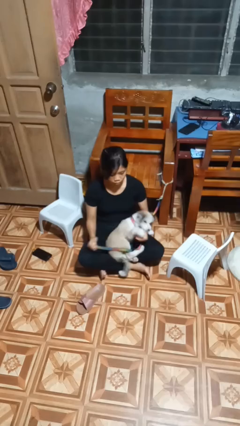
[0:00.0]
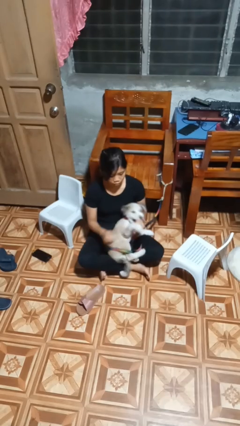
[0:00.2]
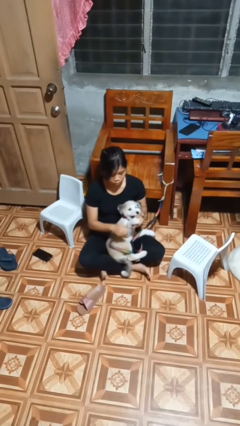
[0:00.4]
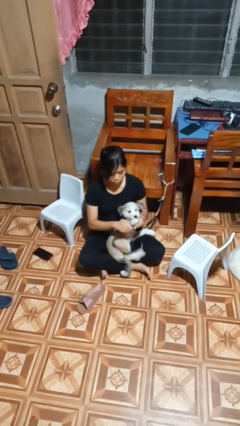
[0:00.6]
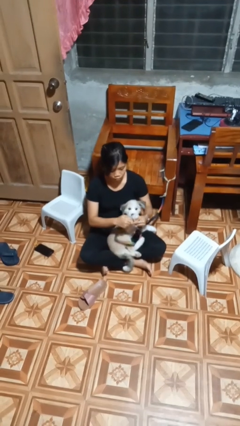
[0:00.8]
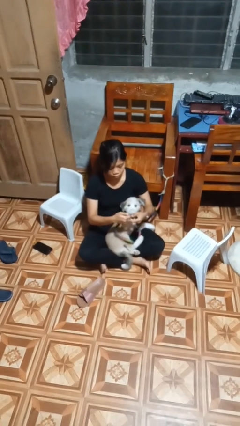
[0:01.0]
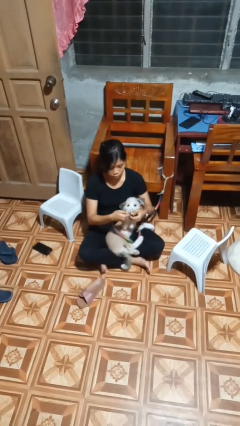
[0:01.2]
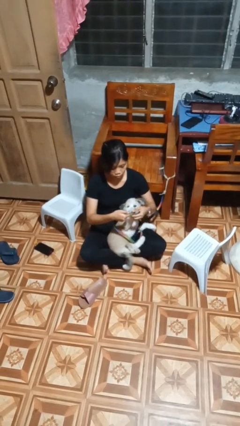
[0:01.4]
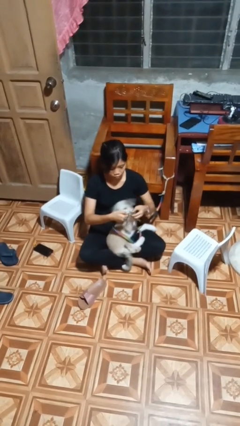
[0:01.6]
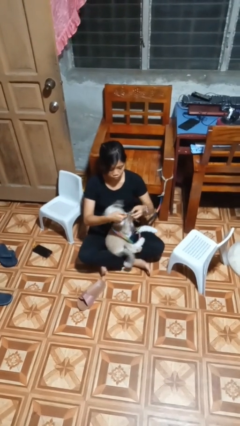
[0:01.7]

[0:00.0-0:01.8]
person attaches leash to dog

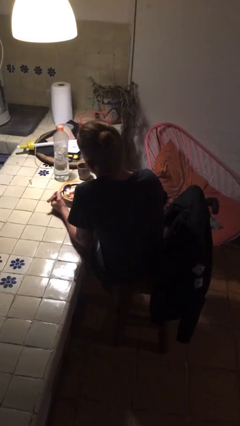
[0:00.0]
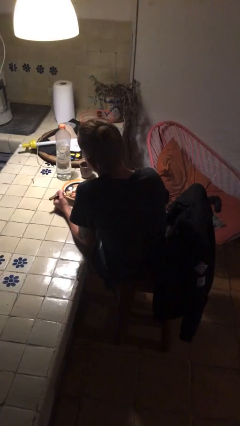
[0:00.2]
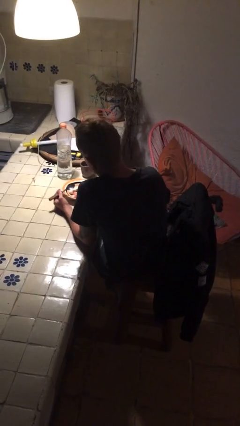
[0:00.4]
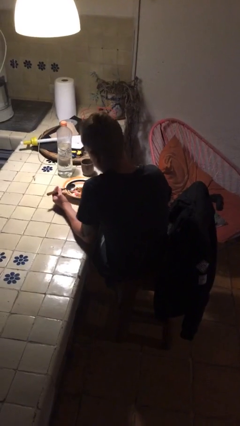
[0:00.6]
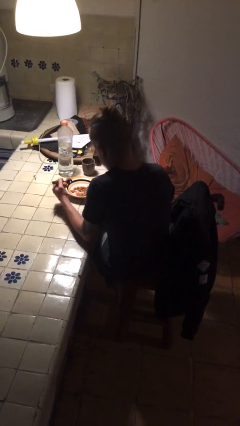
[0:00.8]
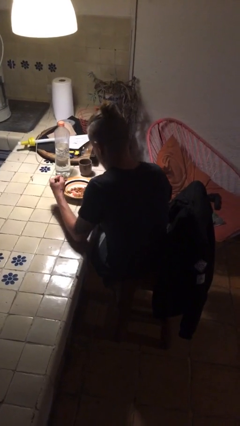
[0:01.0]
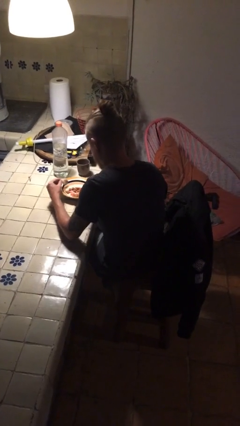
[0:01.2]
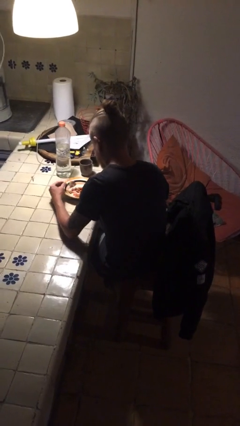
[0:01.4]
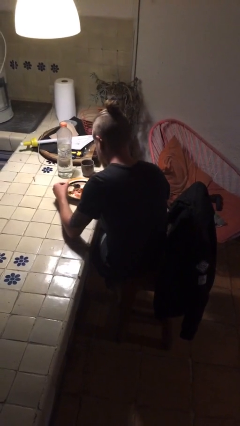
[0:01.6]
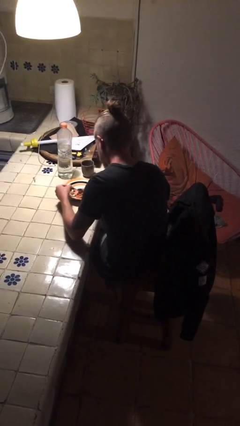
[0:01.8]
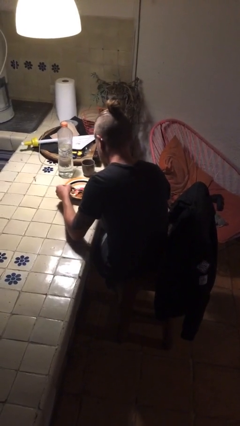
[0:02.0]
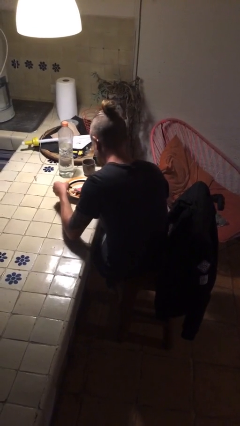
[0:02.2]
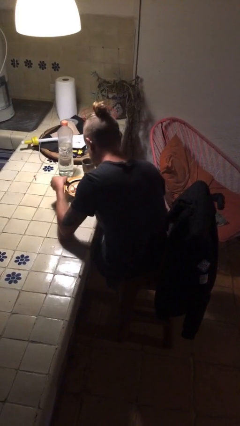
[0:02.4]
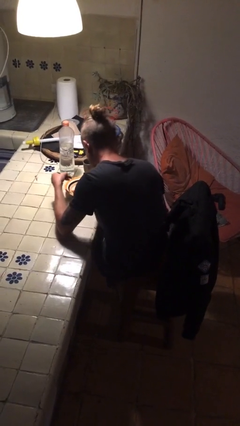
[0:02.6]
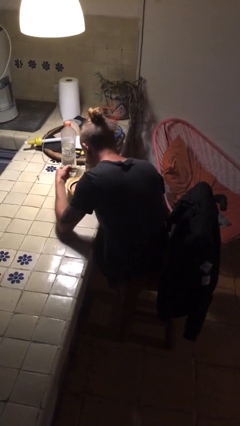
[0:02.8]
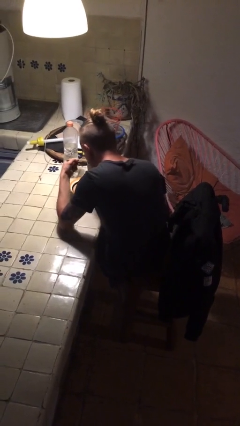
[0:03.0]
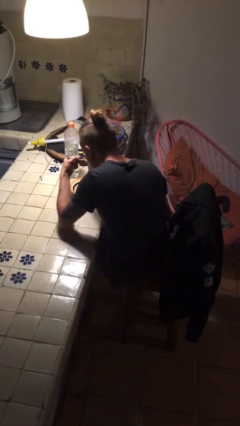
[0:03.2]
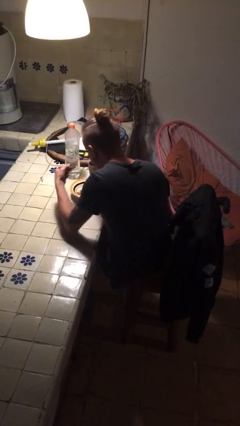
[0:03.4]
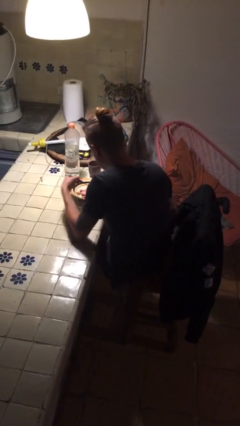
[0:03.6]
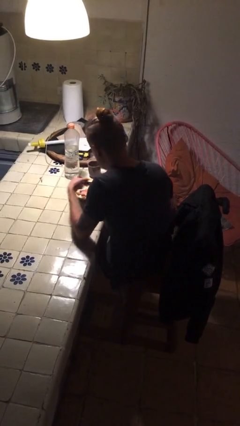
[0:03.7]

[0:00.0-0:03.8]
person eats with utensil

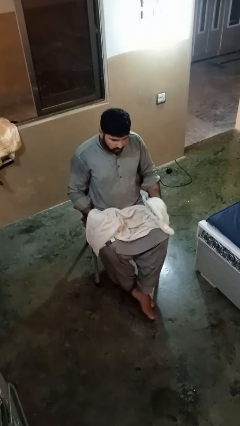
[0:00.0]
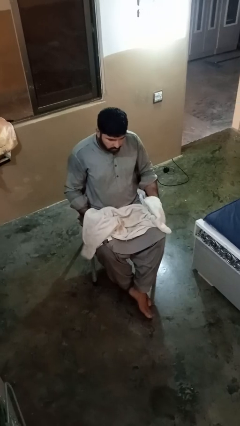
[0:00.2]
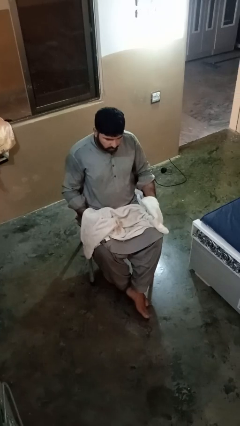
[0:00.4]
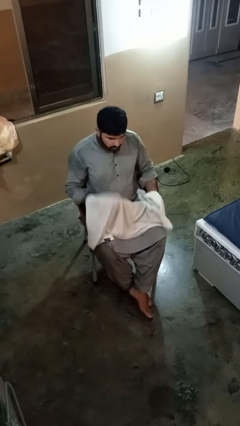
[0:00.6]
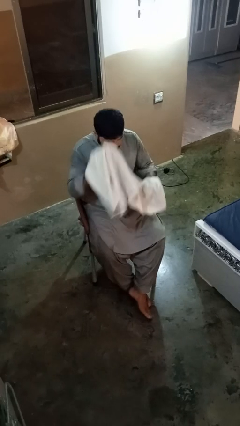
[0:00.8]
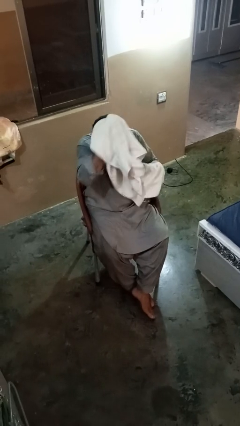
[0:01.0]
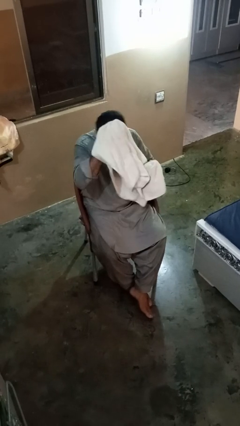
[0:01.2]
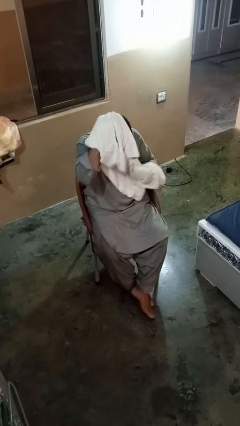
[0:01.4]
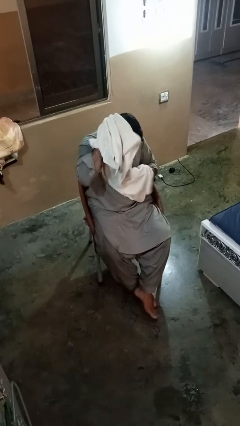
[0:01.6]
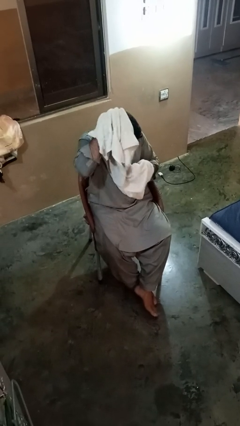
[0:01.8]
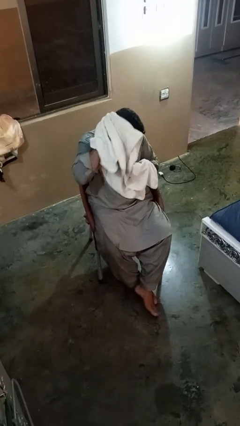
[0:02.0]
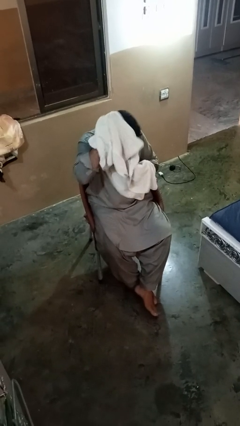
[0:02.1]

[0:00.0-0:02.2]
person dries hair with towel

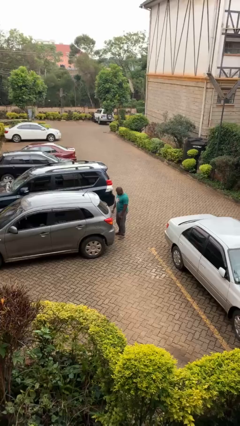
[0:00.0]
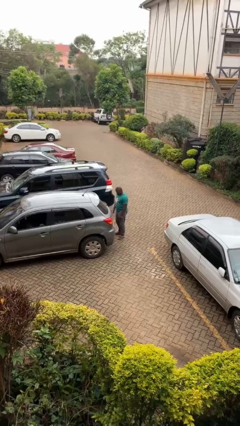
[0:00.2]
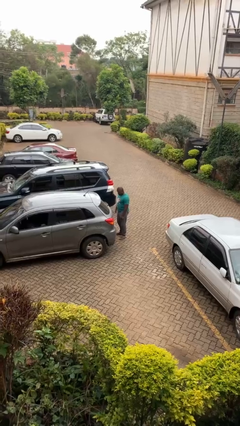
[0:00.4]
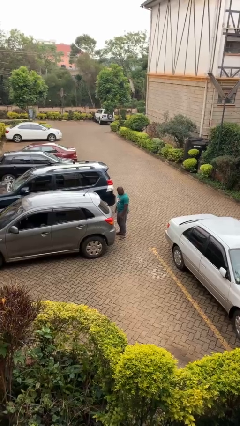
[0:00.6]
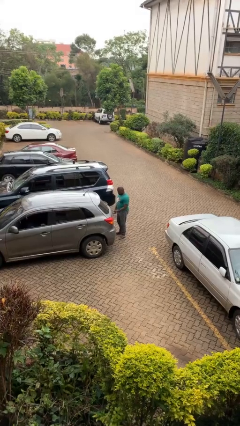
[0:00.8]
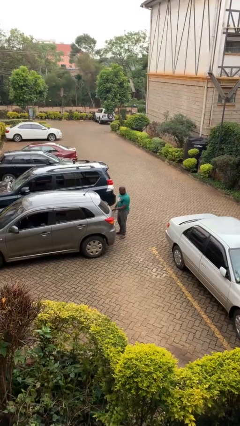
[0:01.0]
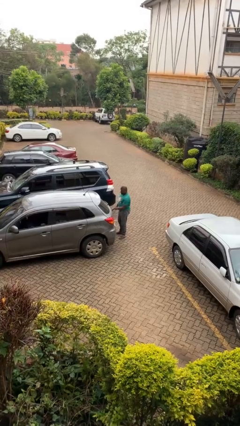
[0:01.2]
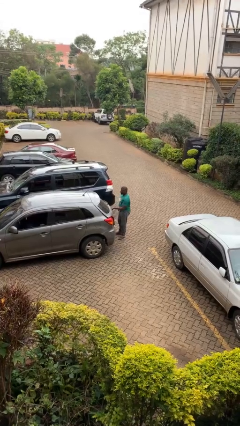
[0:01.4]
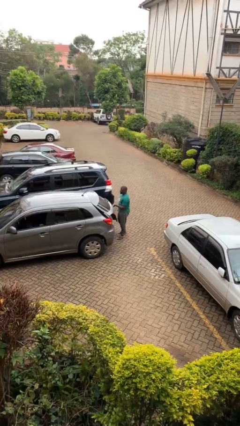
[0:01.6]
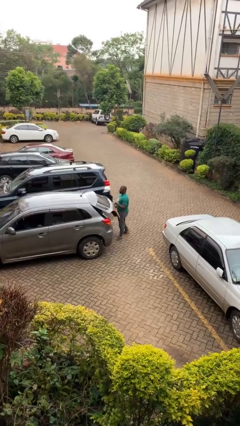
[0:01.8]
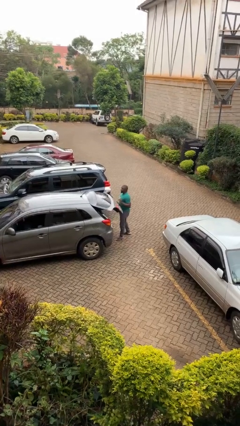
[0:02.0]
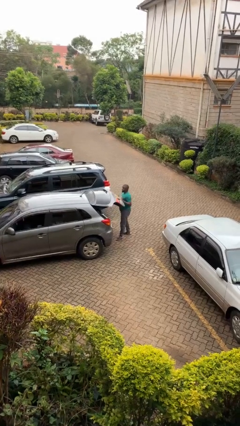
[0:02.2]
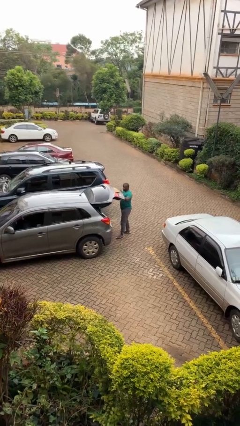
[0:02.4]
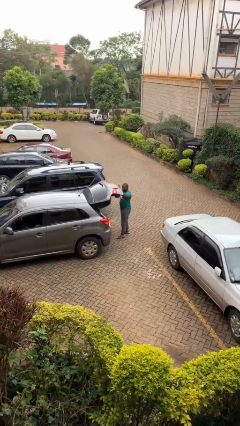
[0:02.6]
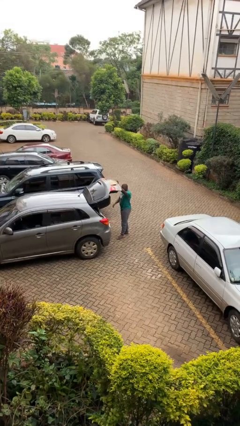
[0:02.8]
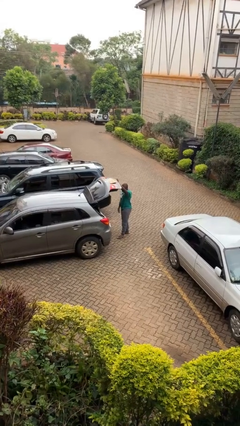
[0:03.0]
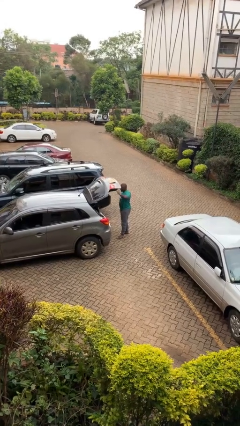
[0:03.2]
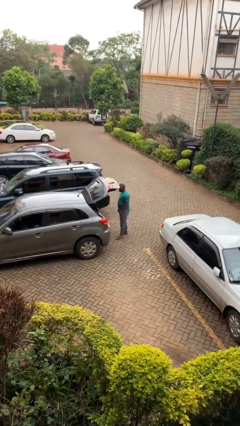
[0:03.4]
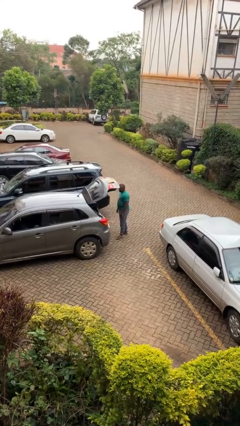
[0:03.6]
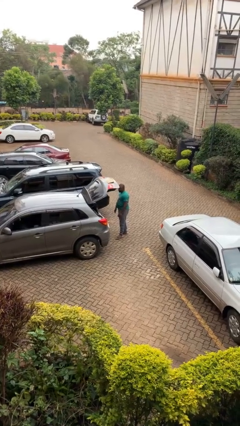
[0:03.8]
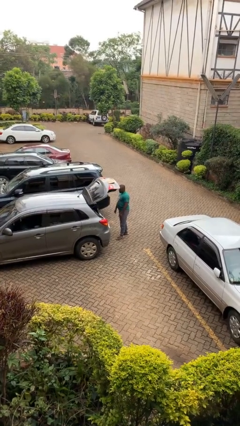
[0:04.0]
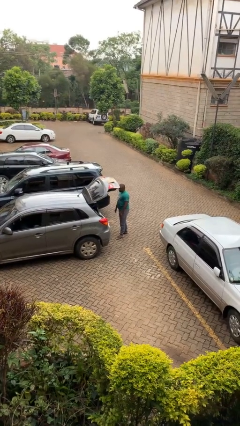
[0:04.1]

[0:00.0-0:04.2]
person opens car trunk

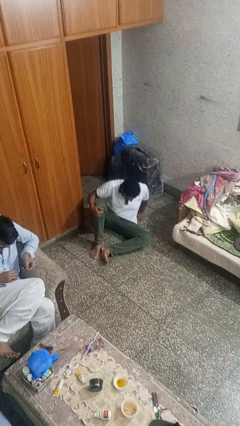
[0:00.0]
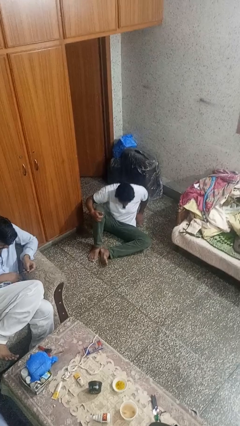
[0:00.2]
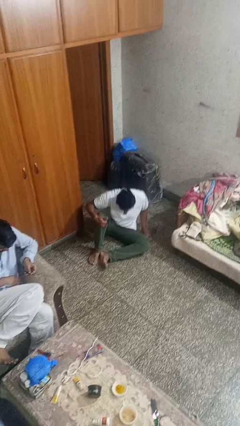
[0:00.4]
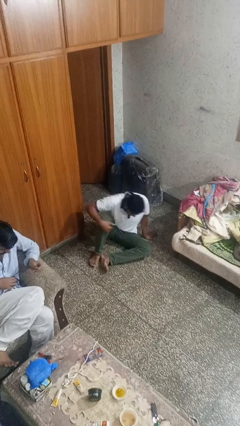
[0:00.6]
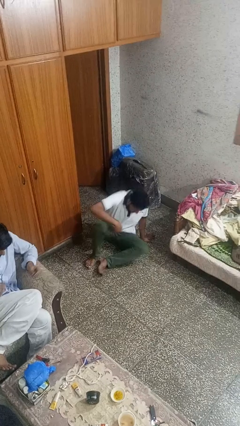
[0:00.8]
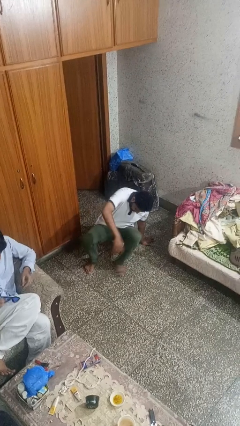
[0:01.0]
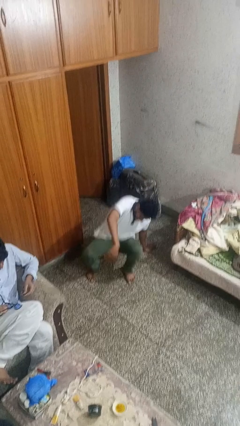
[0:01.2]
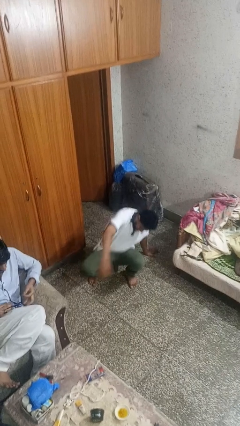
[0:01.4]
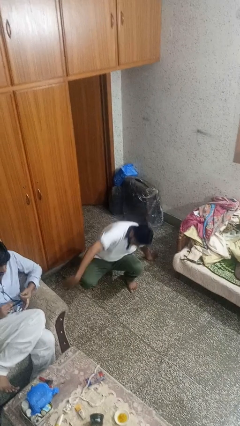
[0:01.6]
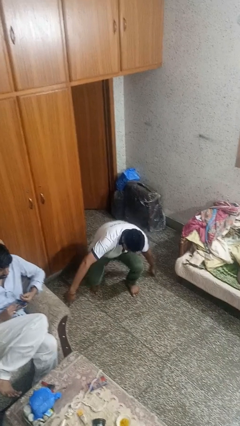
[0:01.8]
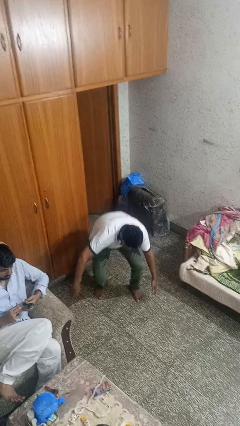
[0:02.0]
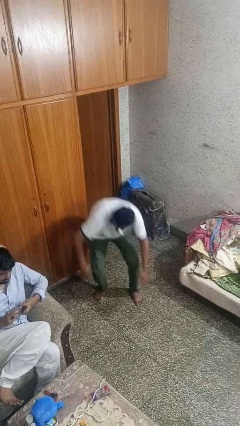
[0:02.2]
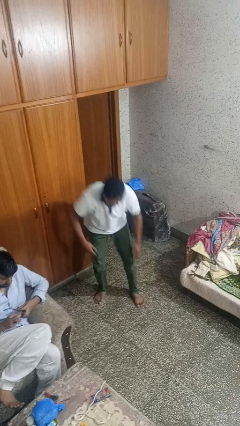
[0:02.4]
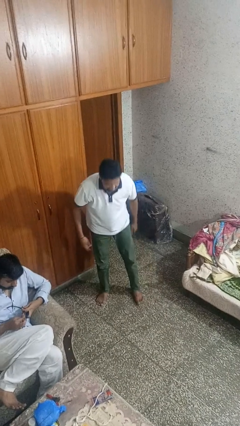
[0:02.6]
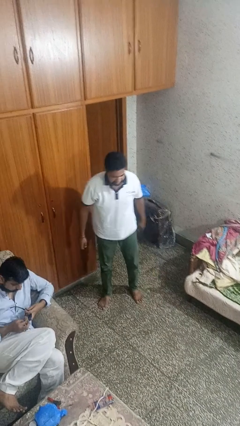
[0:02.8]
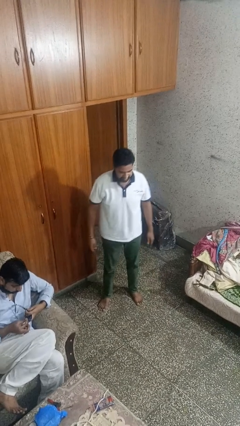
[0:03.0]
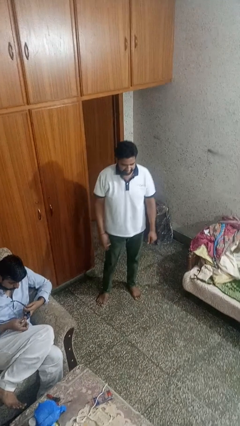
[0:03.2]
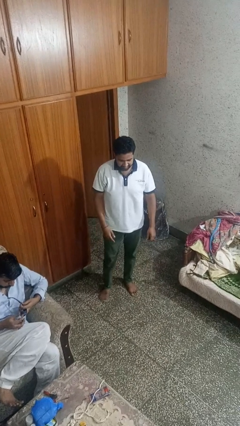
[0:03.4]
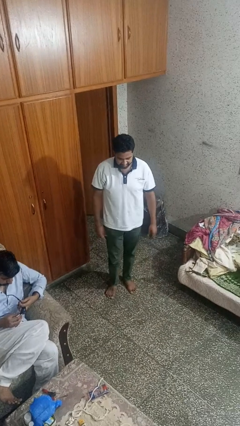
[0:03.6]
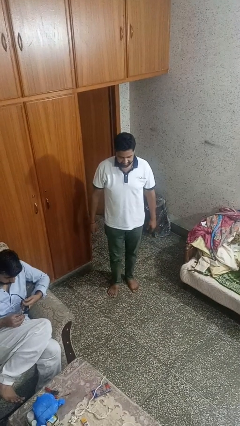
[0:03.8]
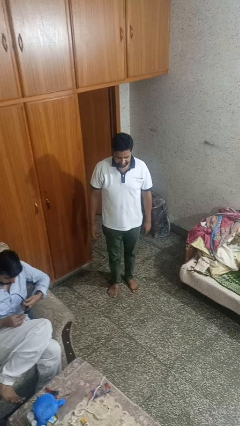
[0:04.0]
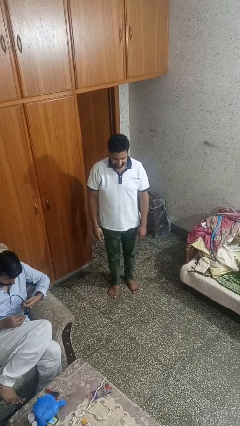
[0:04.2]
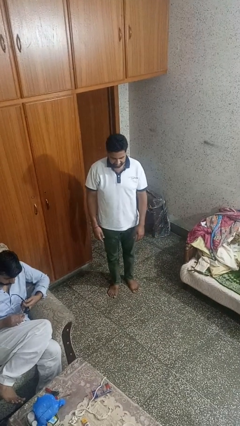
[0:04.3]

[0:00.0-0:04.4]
person stands up from floor

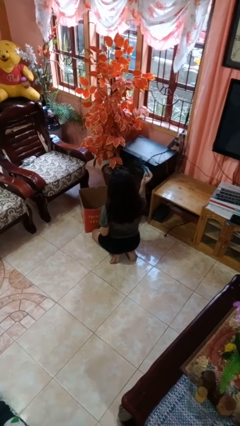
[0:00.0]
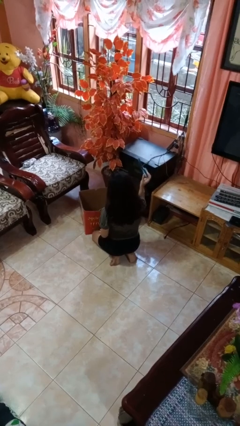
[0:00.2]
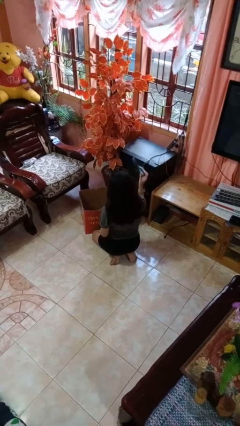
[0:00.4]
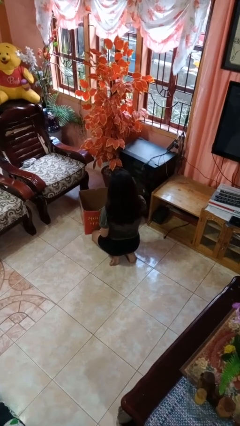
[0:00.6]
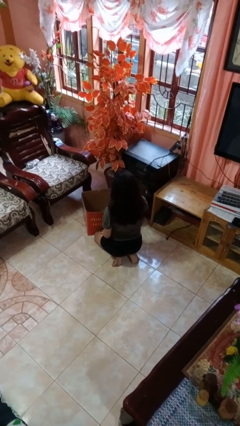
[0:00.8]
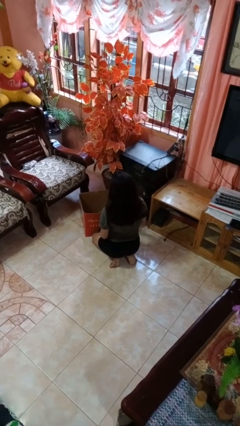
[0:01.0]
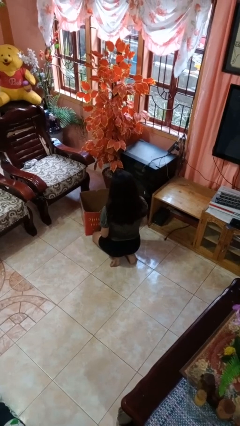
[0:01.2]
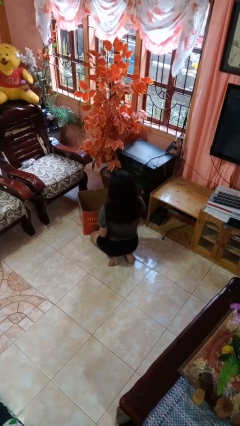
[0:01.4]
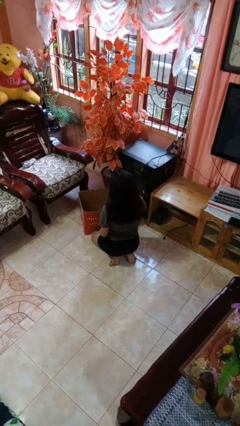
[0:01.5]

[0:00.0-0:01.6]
person puts object into box

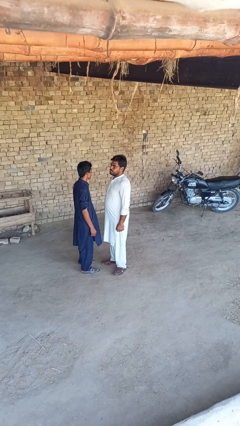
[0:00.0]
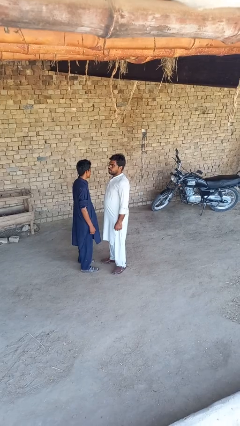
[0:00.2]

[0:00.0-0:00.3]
person picks up person
